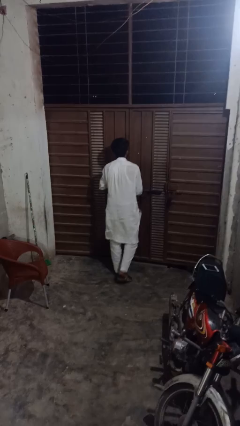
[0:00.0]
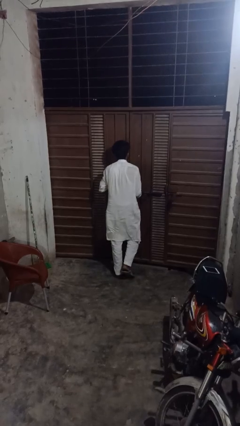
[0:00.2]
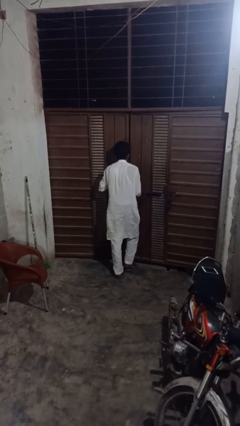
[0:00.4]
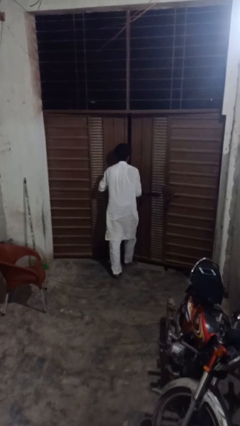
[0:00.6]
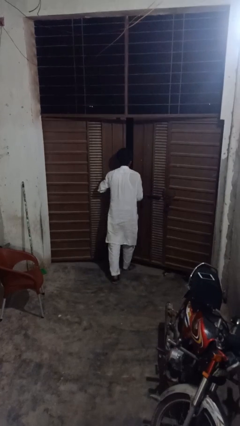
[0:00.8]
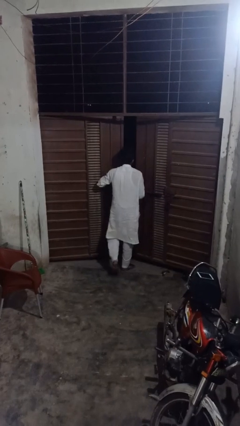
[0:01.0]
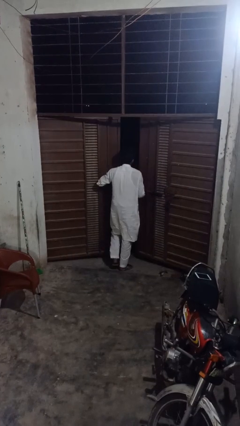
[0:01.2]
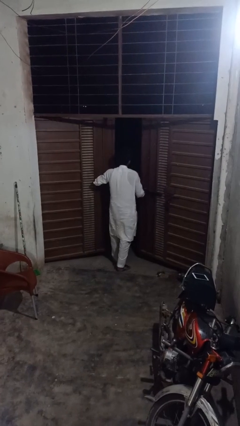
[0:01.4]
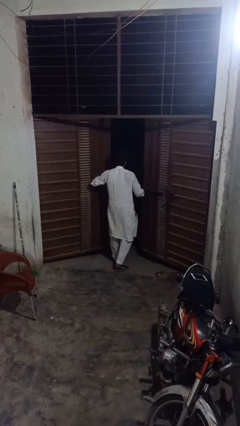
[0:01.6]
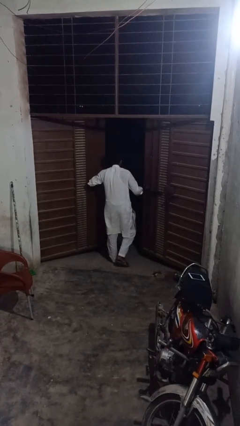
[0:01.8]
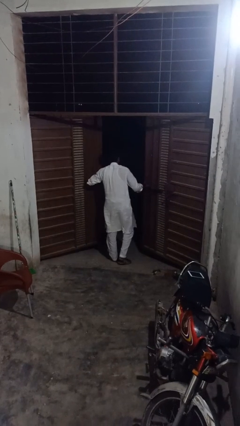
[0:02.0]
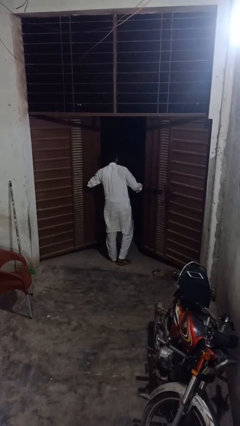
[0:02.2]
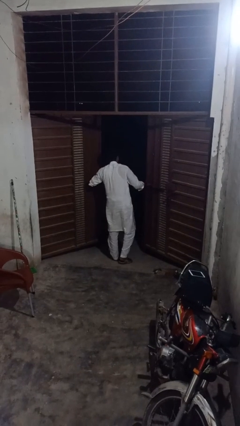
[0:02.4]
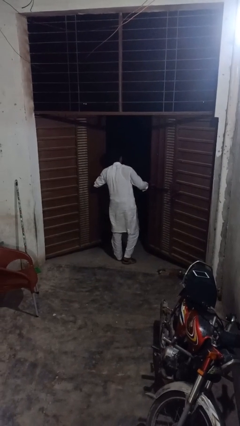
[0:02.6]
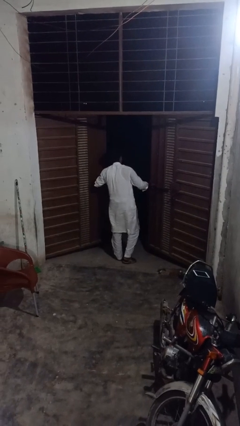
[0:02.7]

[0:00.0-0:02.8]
person opens gate

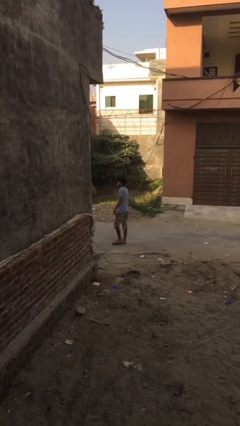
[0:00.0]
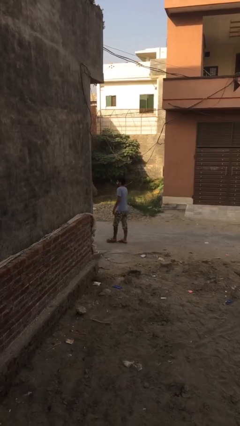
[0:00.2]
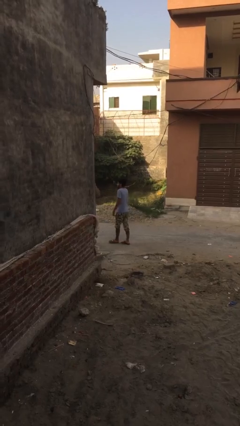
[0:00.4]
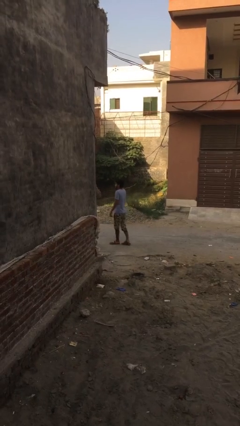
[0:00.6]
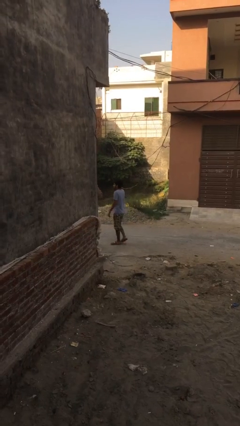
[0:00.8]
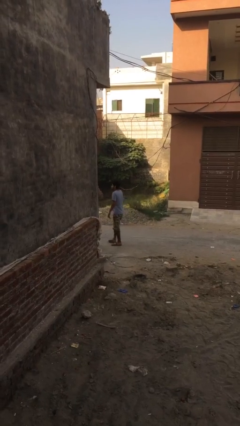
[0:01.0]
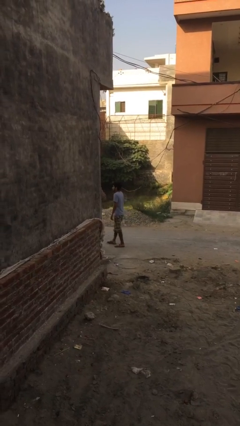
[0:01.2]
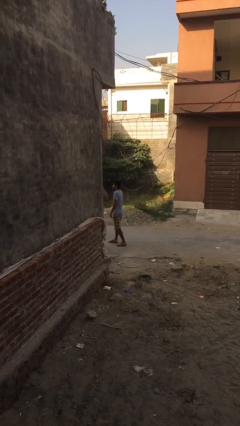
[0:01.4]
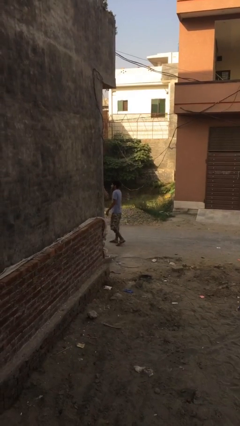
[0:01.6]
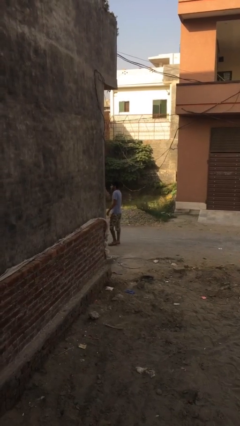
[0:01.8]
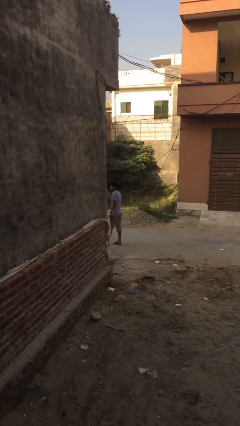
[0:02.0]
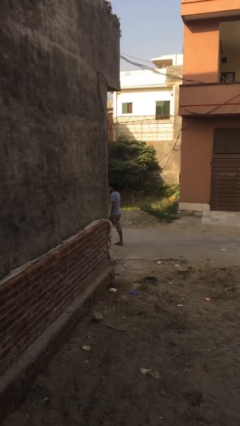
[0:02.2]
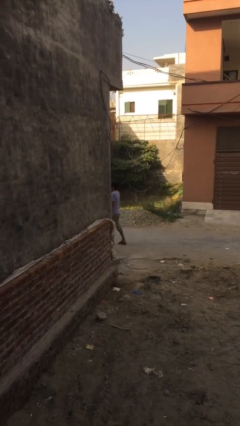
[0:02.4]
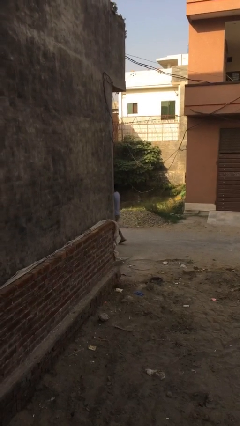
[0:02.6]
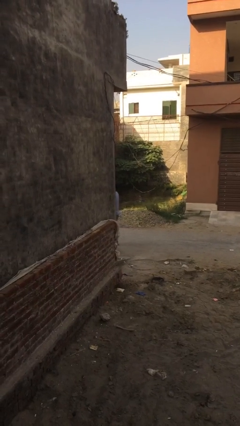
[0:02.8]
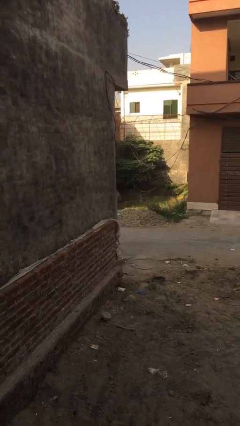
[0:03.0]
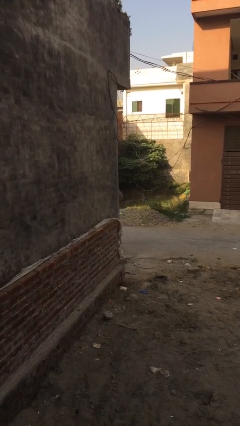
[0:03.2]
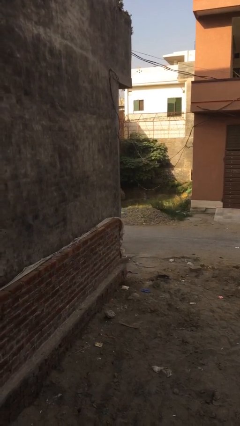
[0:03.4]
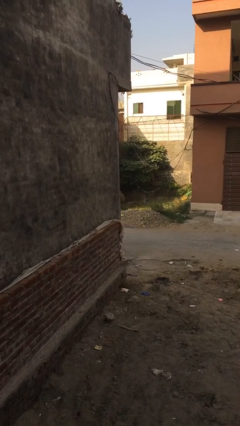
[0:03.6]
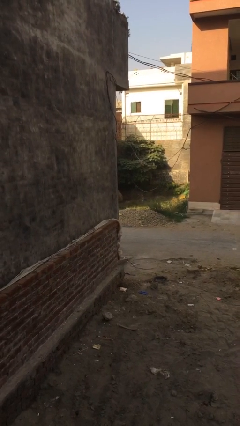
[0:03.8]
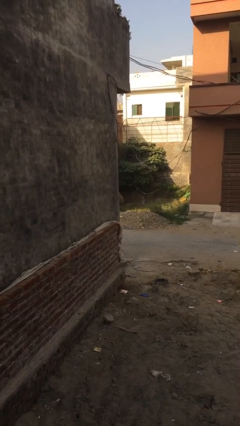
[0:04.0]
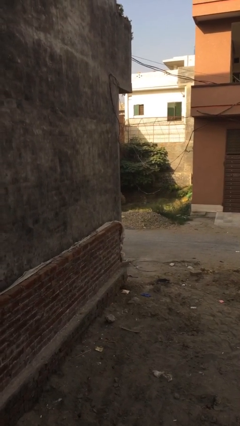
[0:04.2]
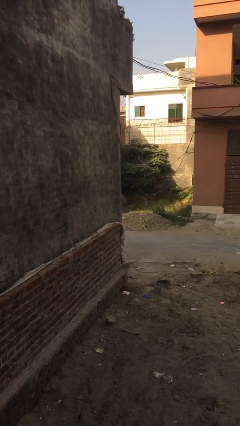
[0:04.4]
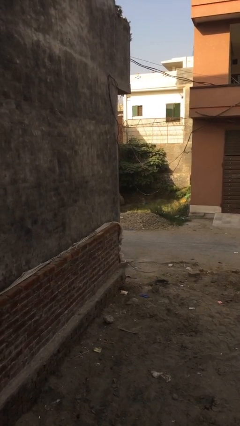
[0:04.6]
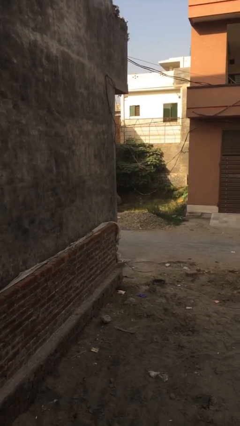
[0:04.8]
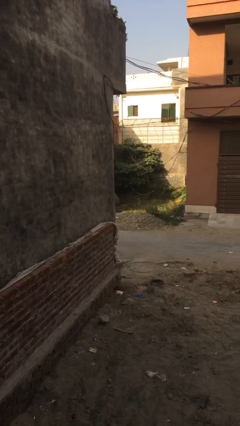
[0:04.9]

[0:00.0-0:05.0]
person exits scene through structure

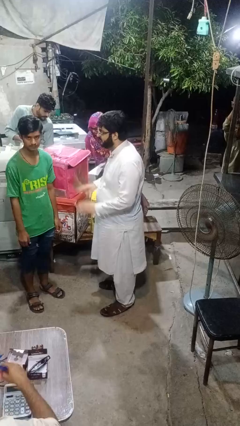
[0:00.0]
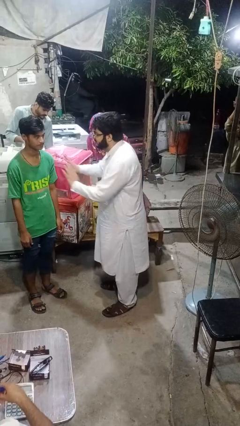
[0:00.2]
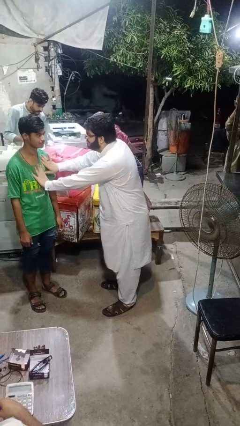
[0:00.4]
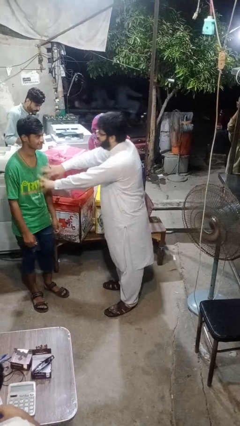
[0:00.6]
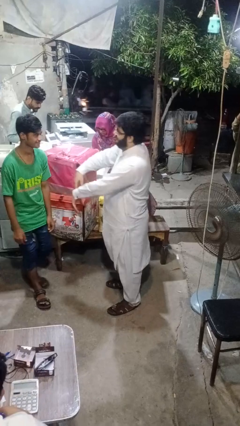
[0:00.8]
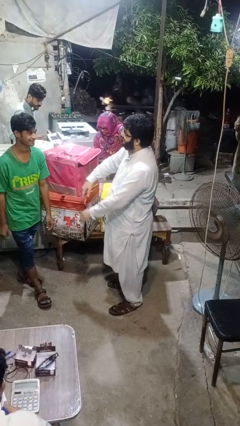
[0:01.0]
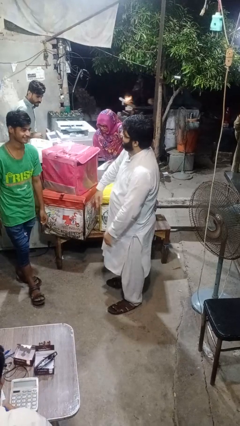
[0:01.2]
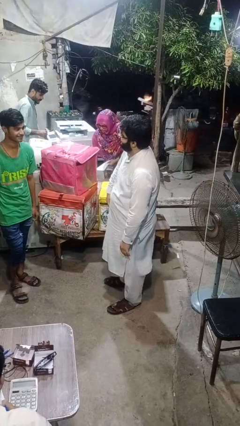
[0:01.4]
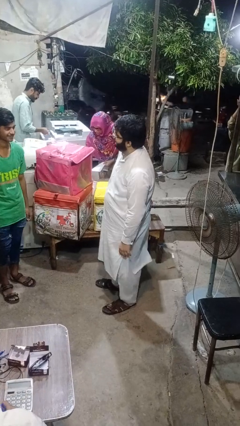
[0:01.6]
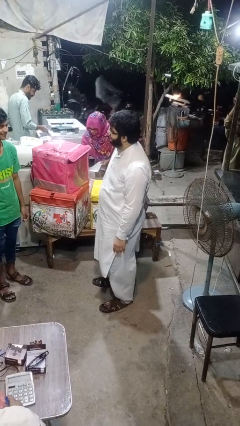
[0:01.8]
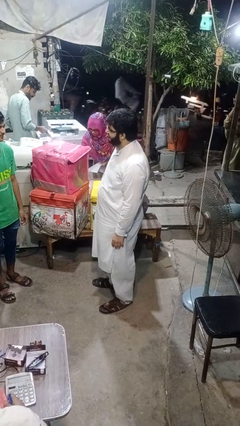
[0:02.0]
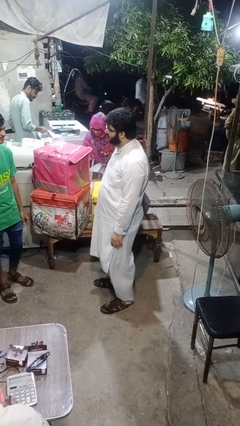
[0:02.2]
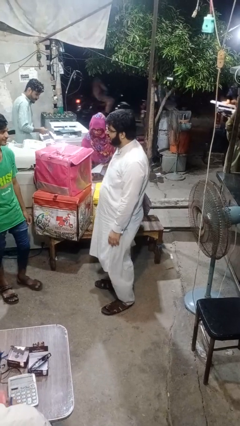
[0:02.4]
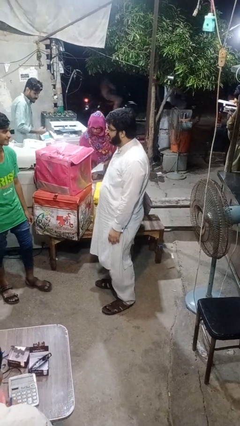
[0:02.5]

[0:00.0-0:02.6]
person shoves person

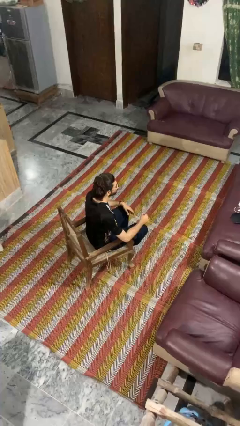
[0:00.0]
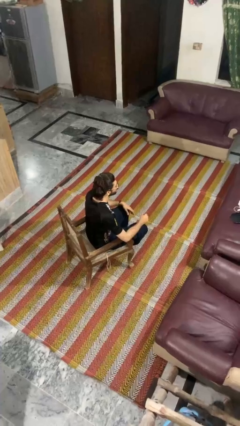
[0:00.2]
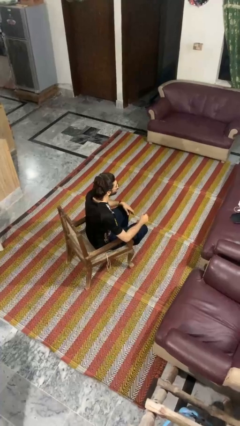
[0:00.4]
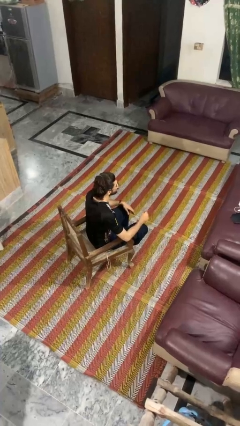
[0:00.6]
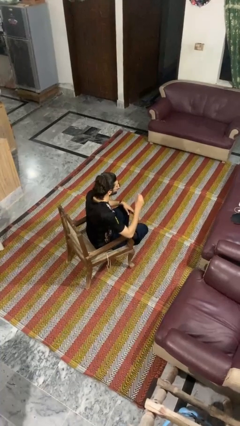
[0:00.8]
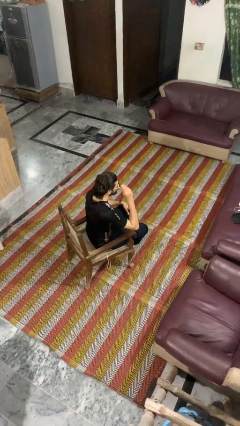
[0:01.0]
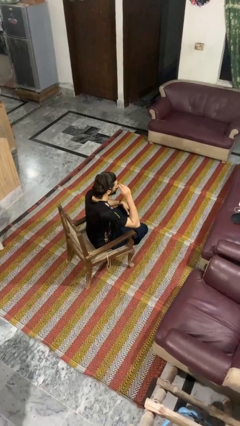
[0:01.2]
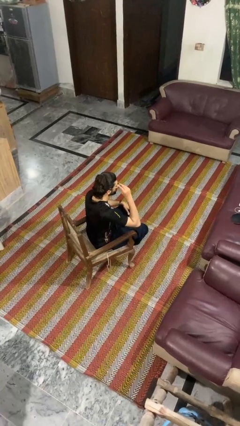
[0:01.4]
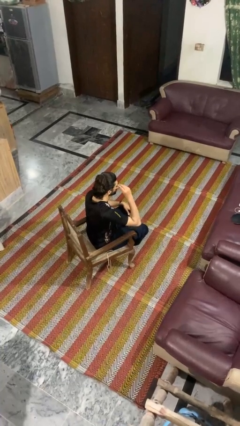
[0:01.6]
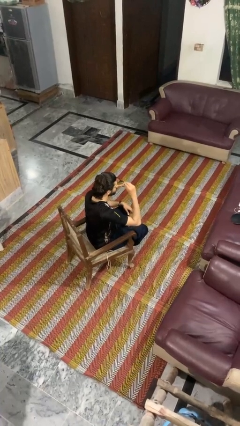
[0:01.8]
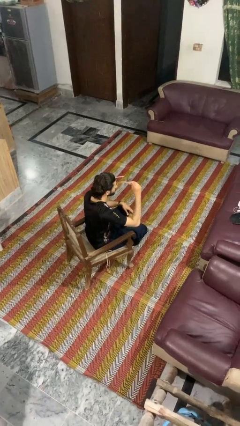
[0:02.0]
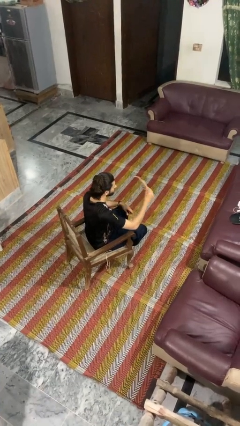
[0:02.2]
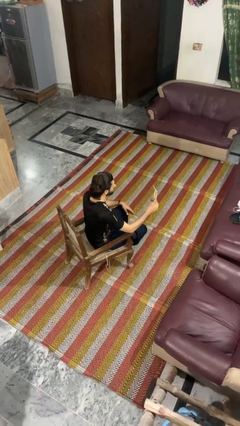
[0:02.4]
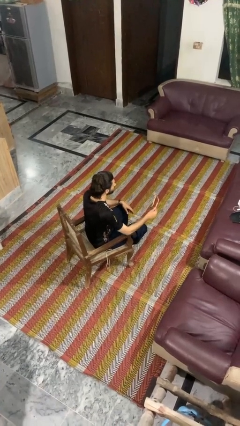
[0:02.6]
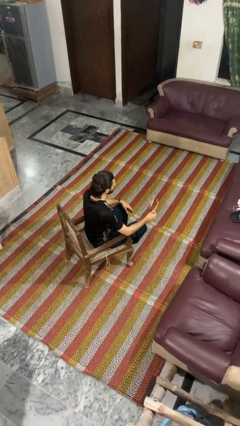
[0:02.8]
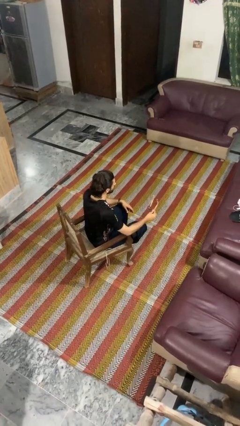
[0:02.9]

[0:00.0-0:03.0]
person takes off glasses

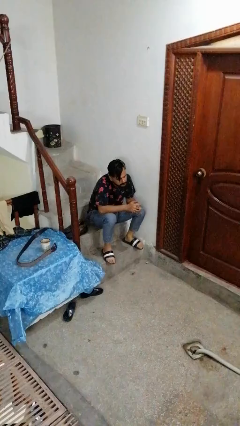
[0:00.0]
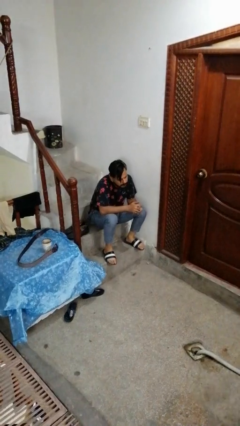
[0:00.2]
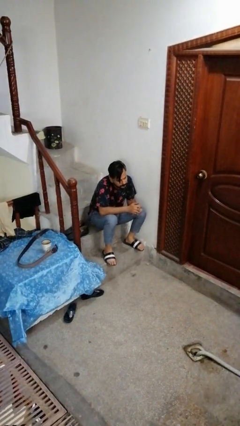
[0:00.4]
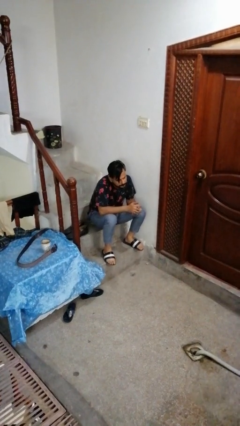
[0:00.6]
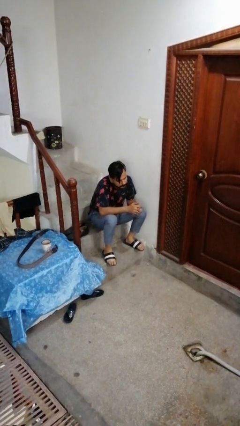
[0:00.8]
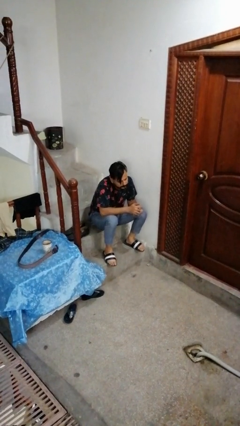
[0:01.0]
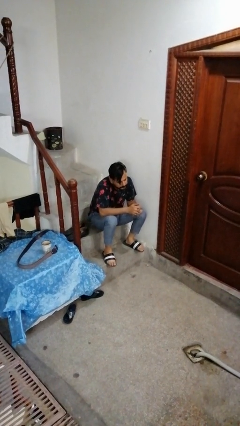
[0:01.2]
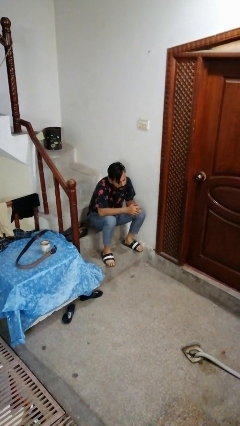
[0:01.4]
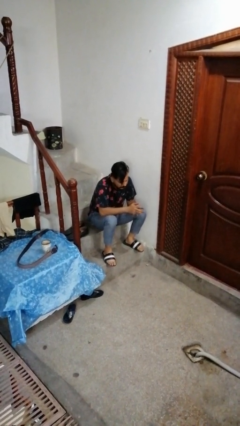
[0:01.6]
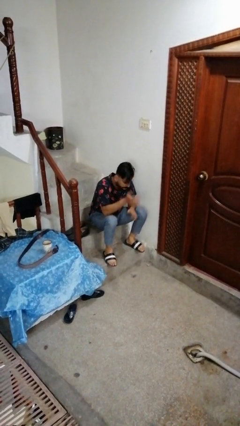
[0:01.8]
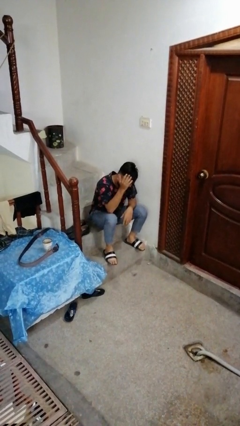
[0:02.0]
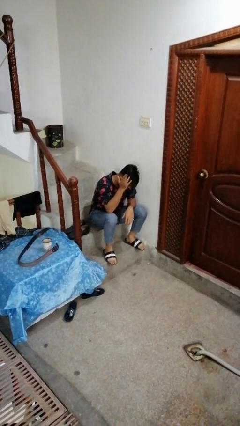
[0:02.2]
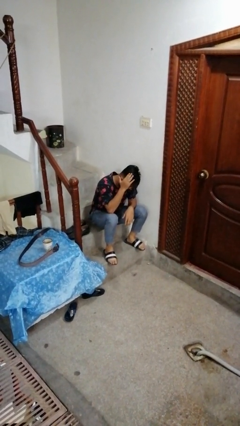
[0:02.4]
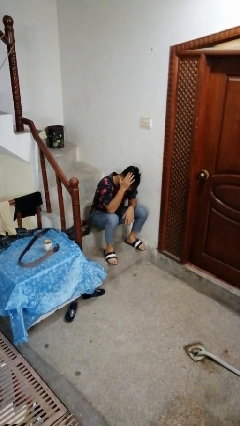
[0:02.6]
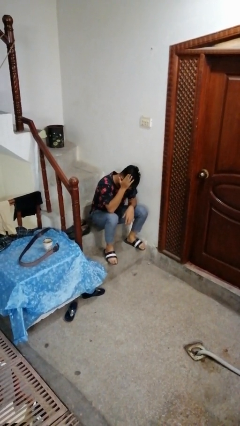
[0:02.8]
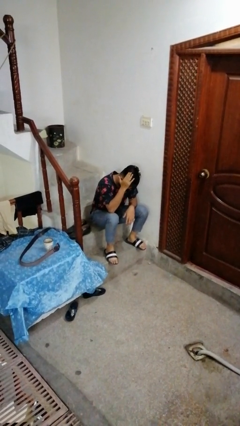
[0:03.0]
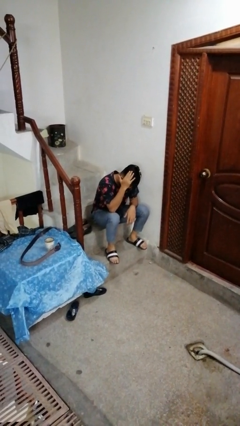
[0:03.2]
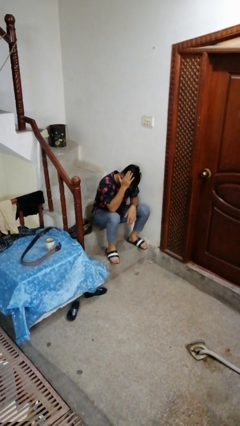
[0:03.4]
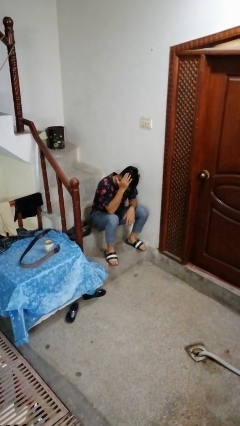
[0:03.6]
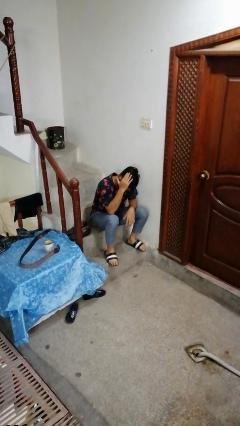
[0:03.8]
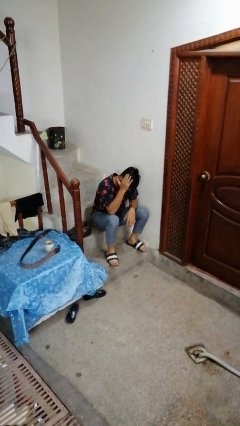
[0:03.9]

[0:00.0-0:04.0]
person strokes hair
